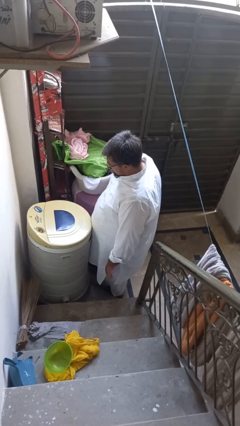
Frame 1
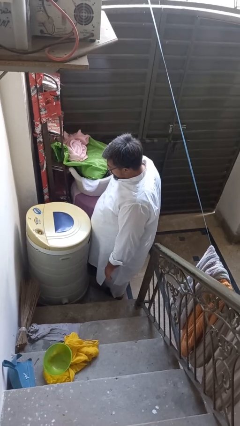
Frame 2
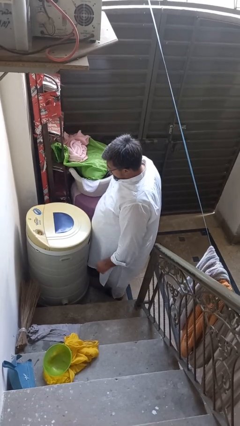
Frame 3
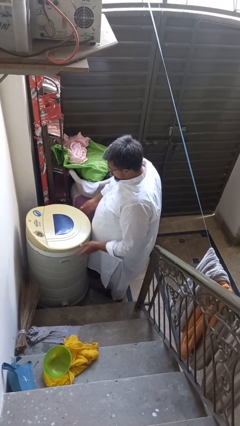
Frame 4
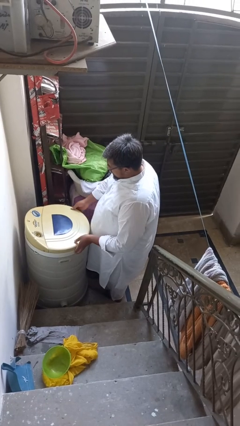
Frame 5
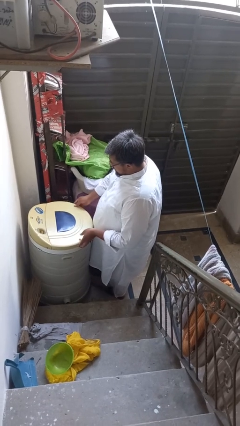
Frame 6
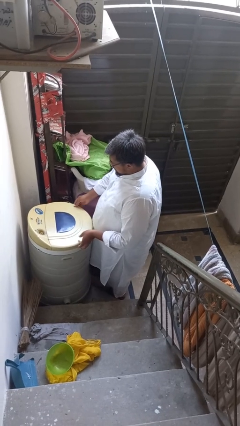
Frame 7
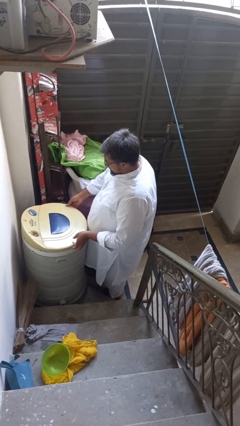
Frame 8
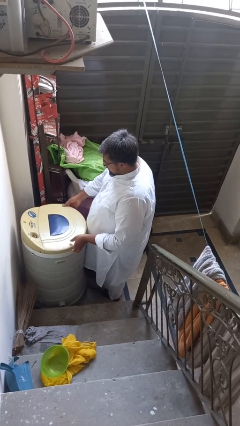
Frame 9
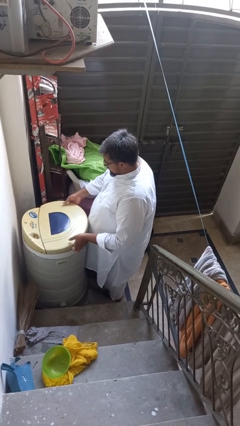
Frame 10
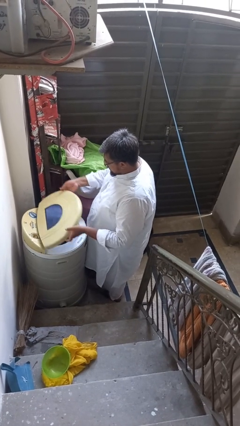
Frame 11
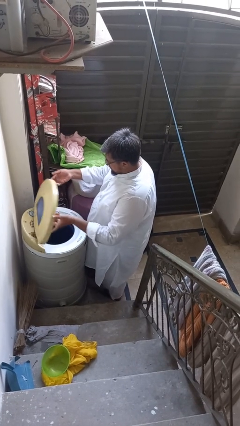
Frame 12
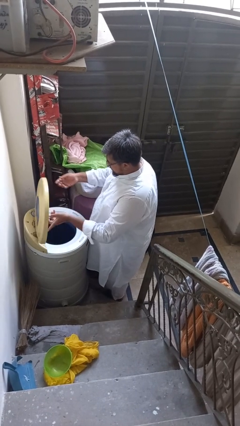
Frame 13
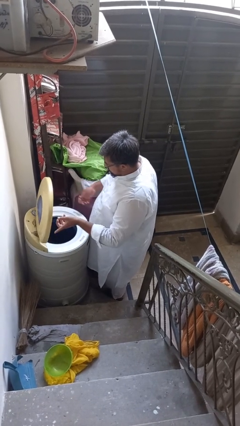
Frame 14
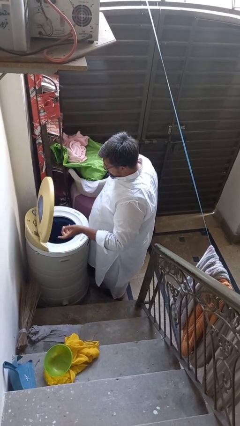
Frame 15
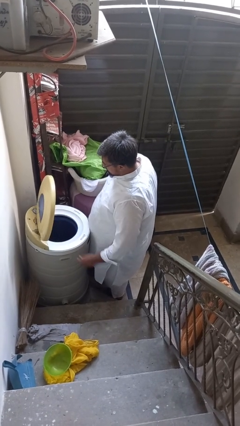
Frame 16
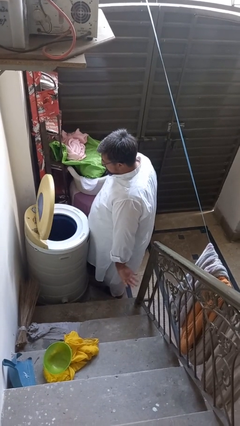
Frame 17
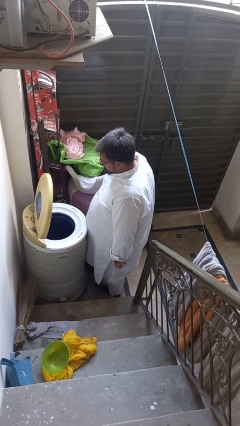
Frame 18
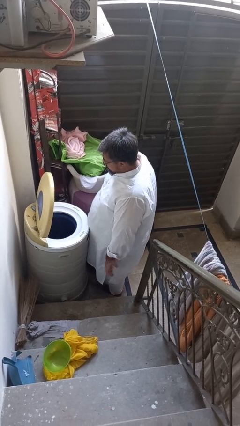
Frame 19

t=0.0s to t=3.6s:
person opens clothes washer

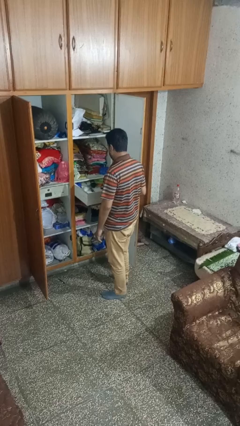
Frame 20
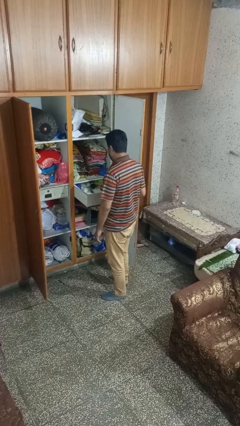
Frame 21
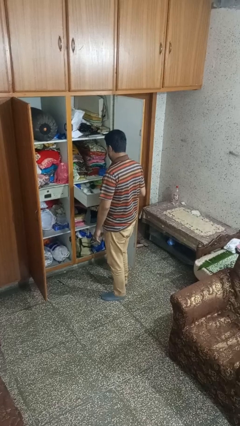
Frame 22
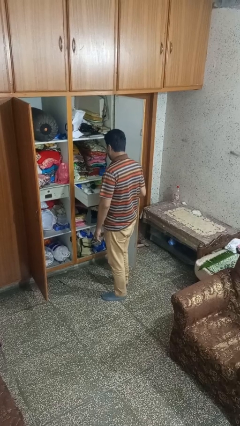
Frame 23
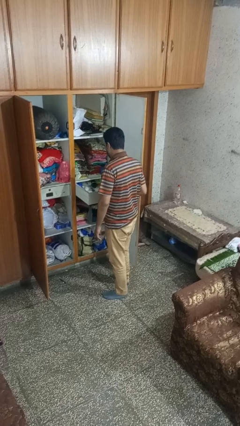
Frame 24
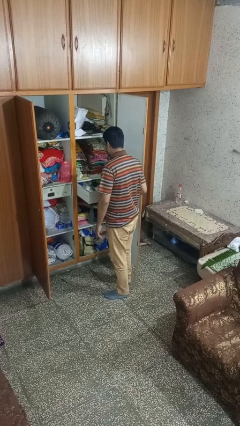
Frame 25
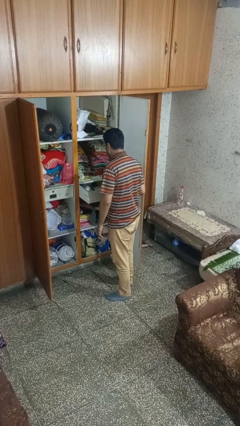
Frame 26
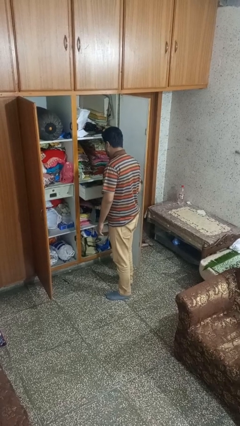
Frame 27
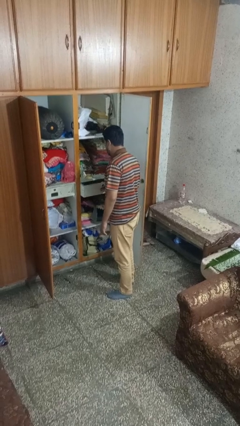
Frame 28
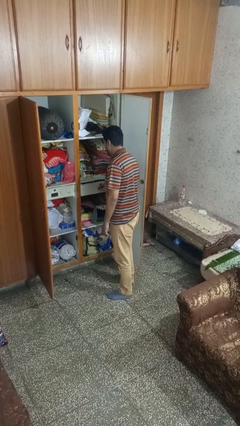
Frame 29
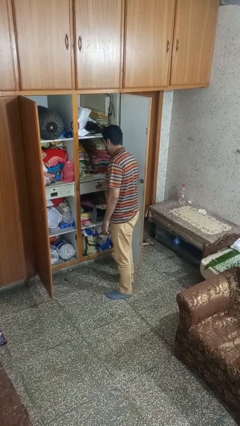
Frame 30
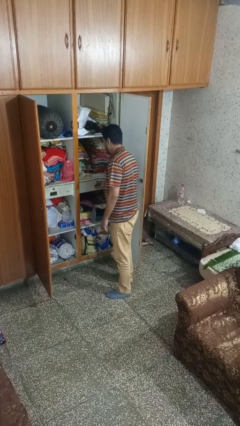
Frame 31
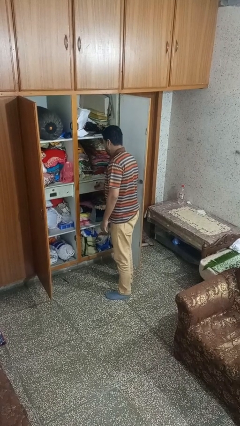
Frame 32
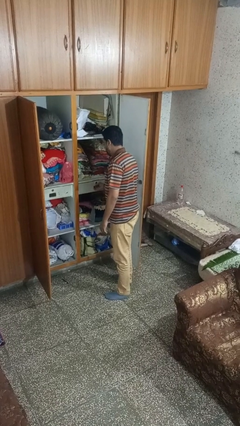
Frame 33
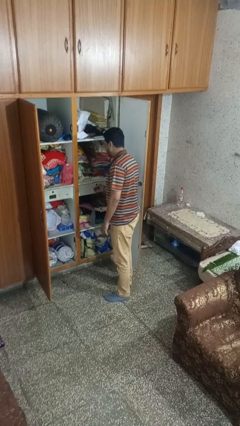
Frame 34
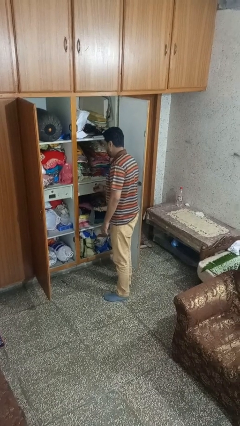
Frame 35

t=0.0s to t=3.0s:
person closes dresser drawer

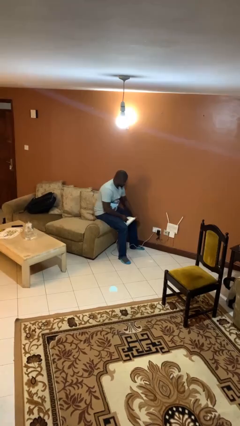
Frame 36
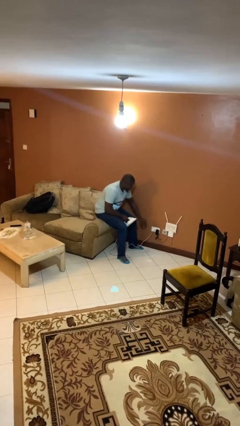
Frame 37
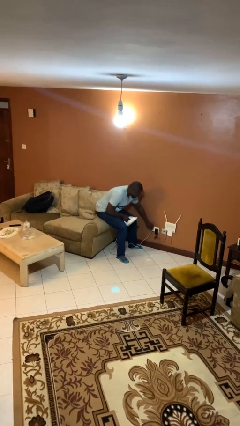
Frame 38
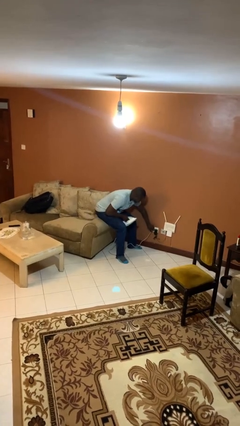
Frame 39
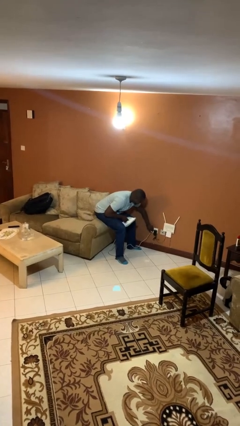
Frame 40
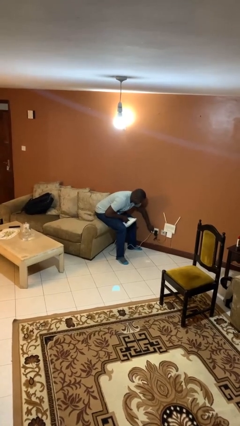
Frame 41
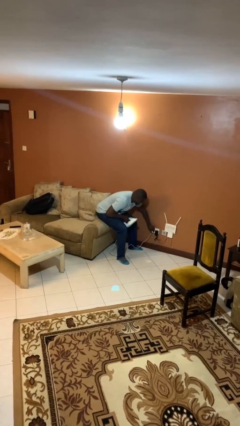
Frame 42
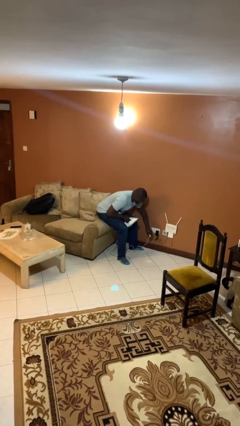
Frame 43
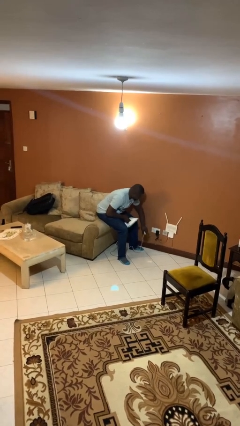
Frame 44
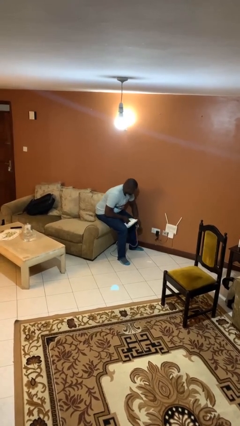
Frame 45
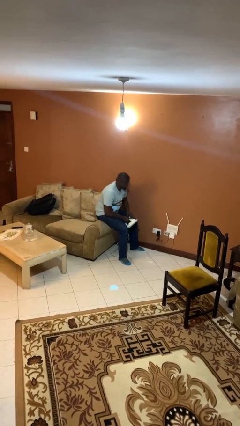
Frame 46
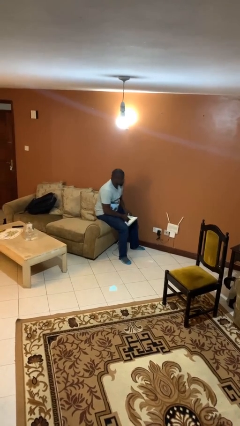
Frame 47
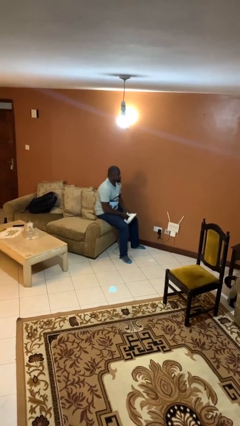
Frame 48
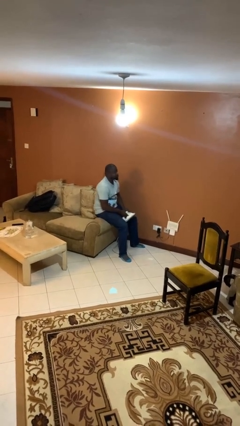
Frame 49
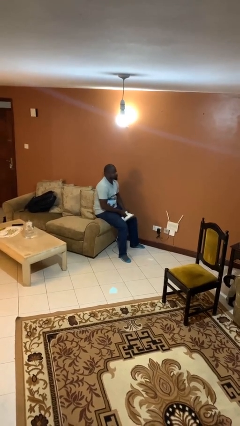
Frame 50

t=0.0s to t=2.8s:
person unplugs from electrical socket

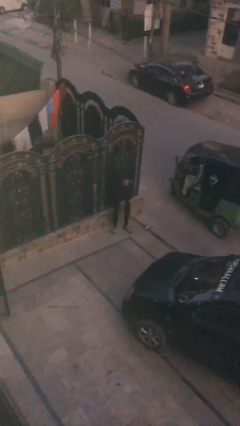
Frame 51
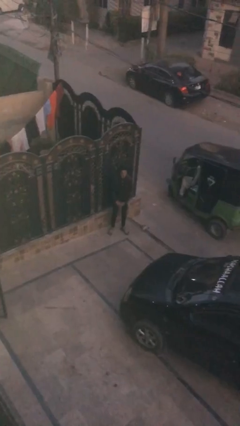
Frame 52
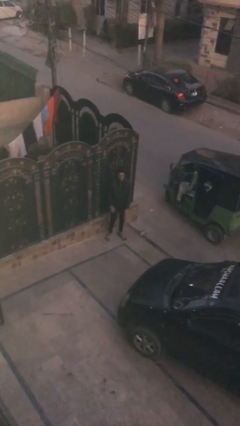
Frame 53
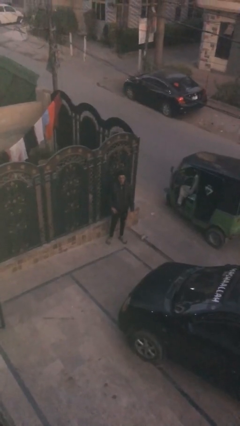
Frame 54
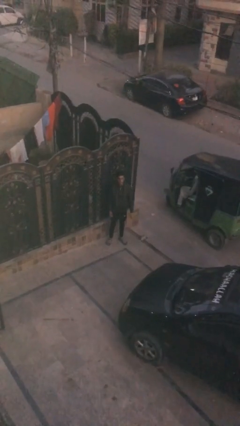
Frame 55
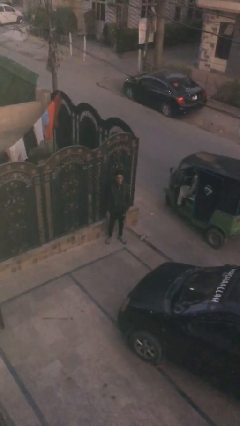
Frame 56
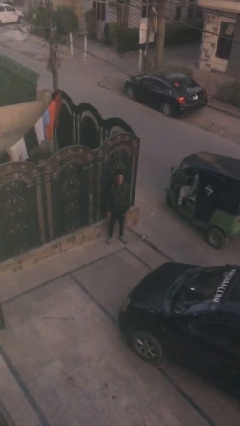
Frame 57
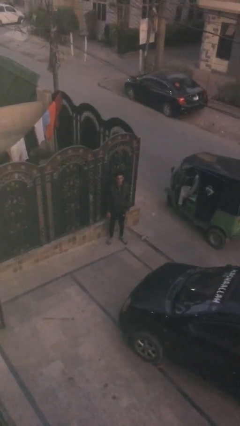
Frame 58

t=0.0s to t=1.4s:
person stands up

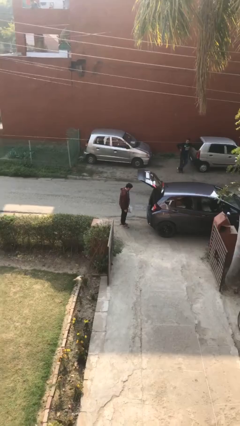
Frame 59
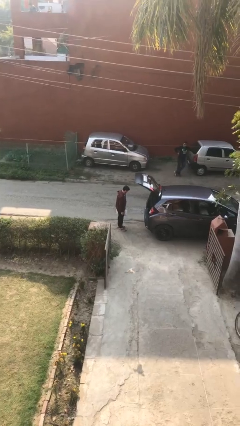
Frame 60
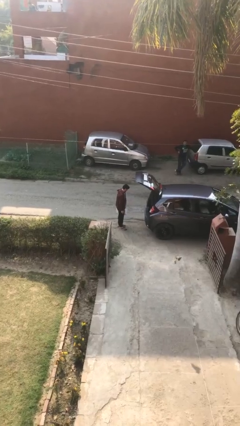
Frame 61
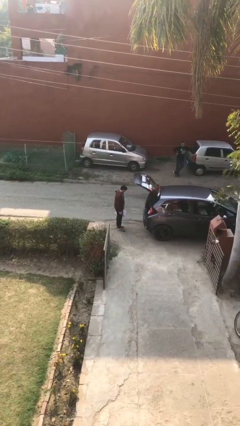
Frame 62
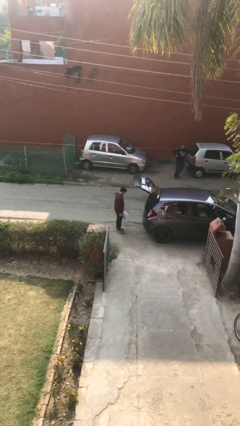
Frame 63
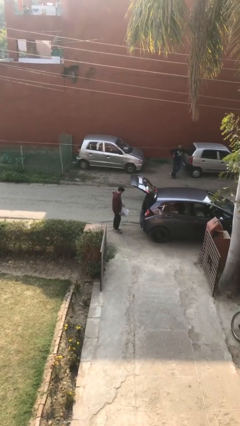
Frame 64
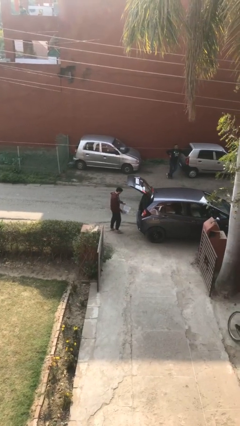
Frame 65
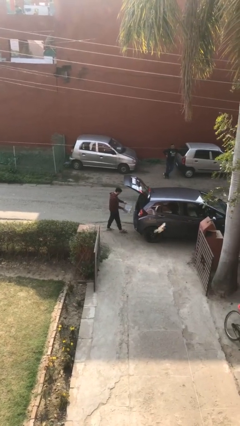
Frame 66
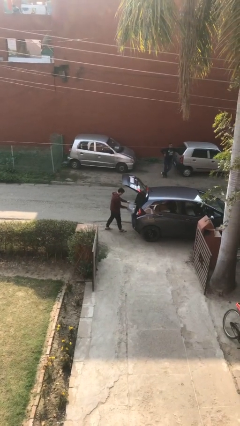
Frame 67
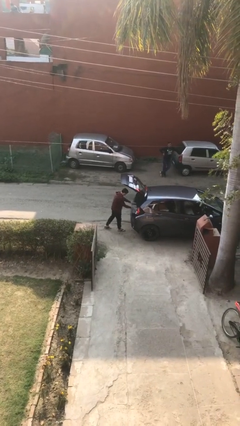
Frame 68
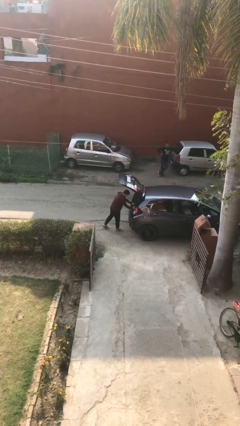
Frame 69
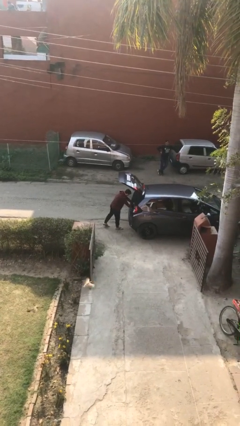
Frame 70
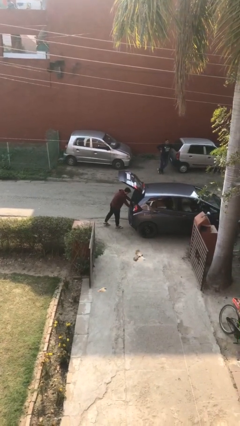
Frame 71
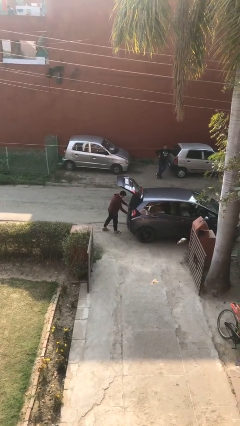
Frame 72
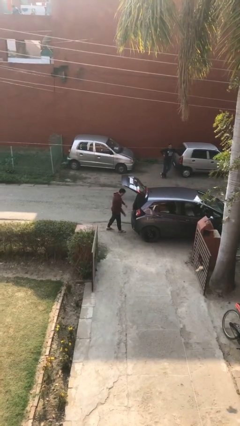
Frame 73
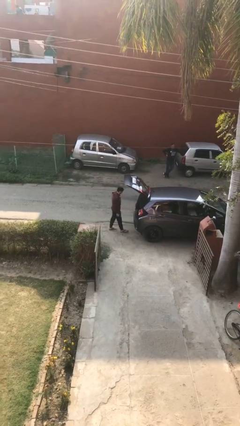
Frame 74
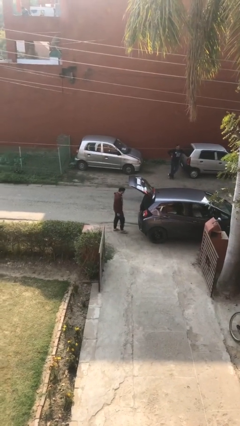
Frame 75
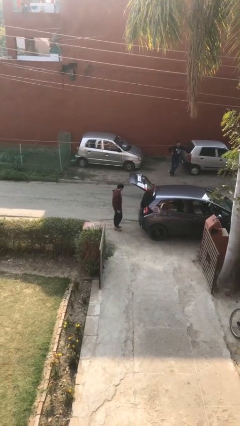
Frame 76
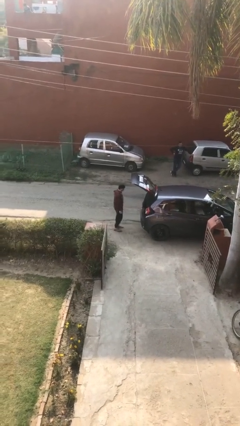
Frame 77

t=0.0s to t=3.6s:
person loads car

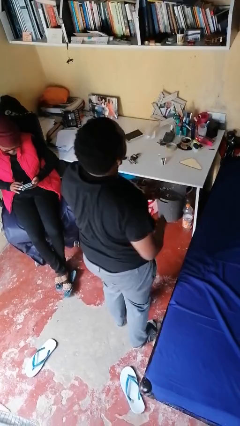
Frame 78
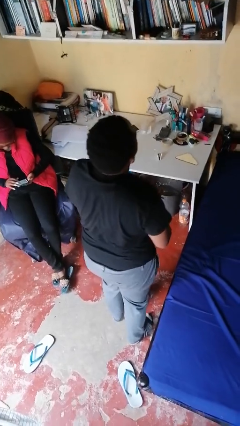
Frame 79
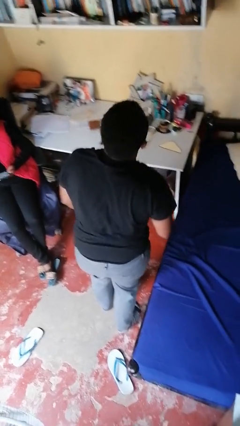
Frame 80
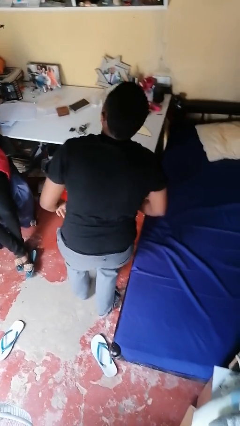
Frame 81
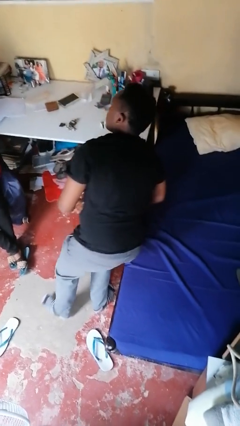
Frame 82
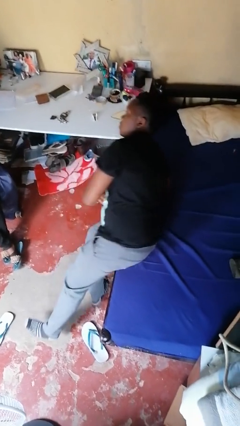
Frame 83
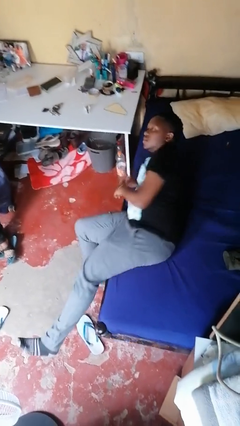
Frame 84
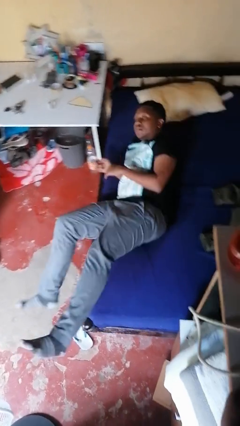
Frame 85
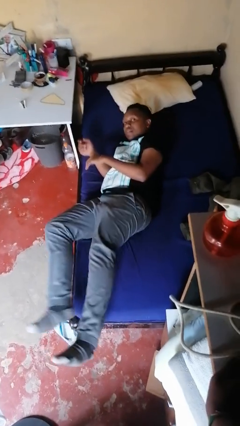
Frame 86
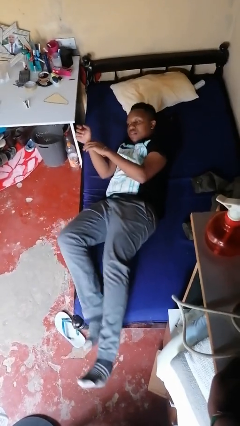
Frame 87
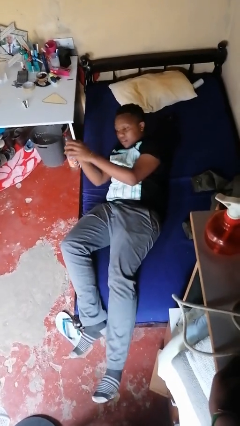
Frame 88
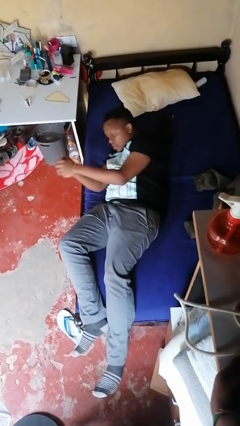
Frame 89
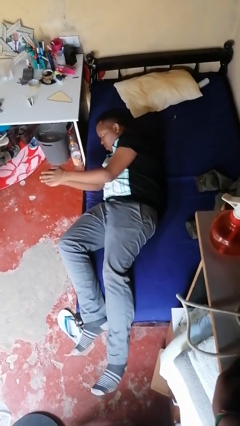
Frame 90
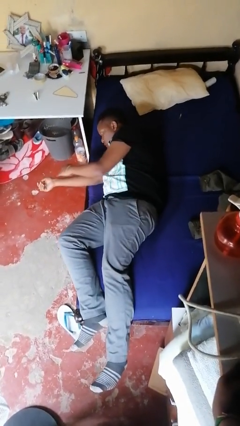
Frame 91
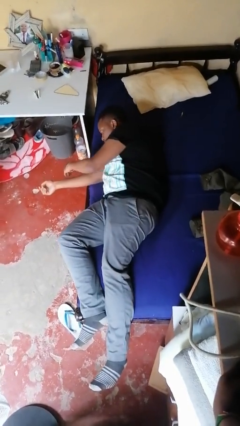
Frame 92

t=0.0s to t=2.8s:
person lies down on bed
